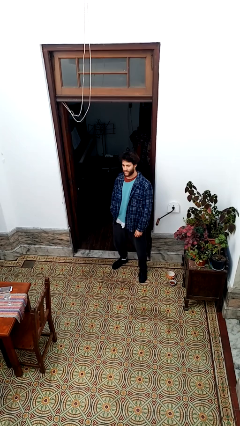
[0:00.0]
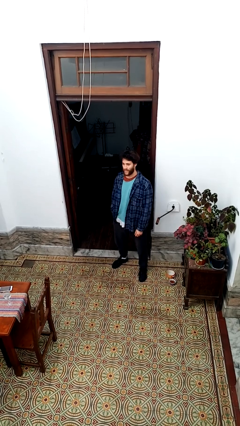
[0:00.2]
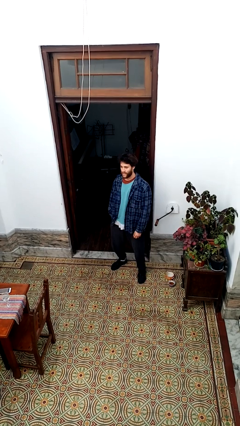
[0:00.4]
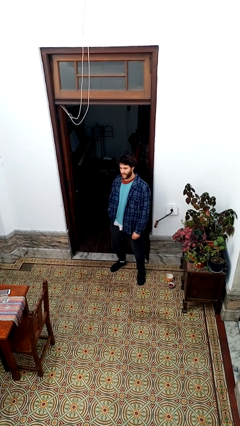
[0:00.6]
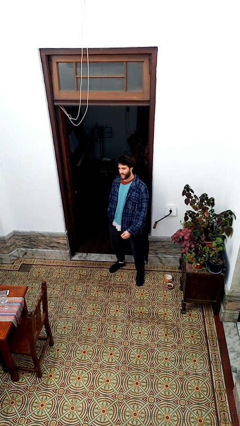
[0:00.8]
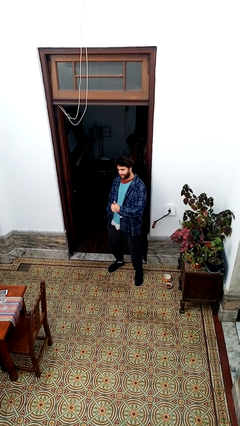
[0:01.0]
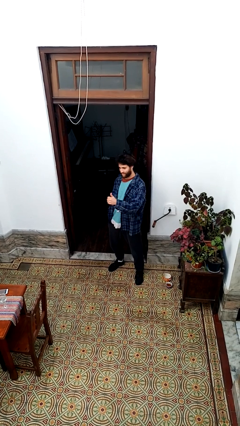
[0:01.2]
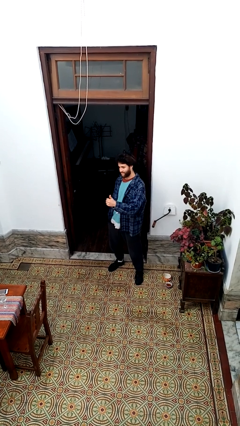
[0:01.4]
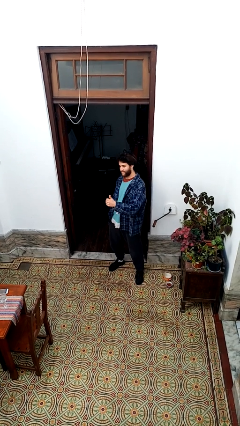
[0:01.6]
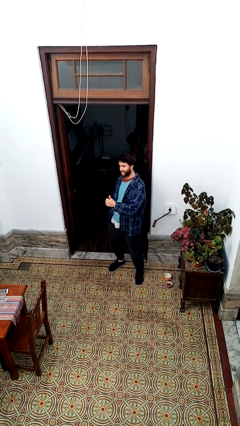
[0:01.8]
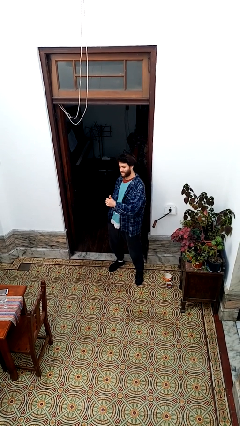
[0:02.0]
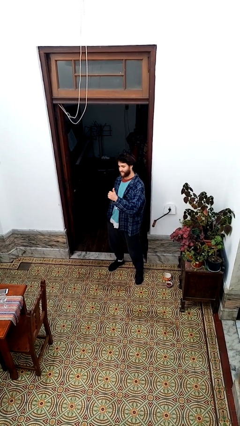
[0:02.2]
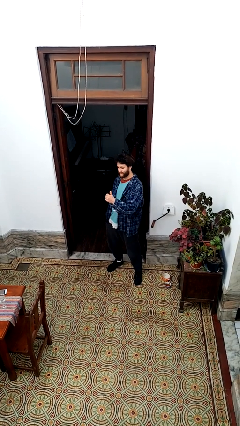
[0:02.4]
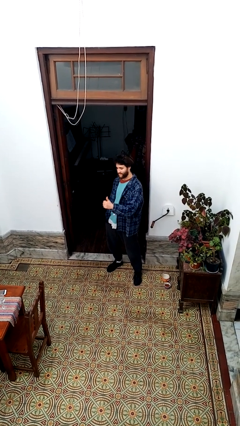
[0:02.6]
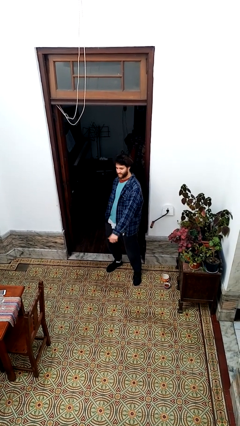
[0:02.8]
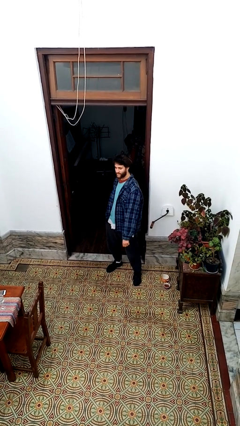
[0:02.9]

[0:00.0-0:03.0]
person gestures thumbs up

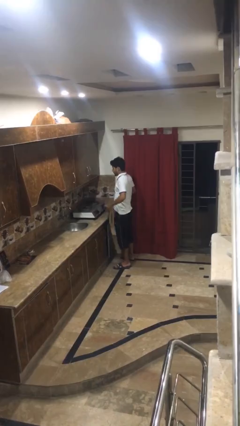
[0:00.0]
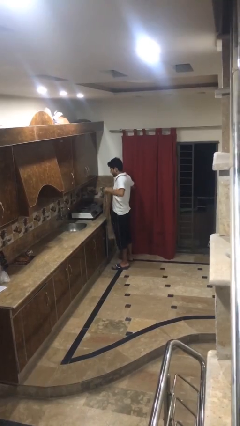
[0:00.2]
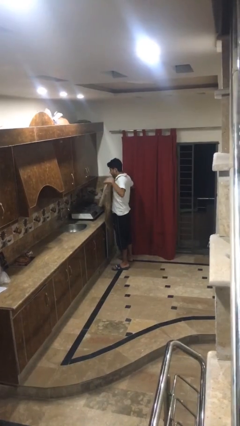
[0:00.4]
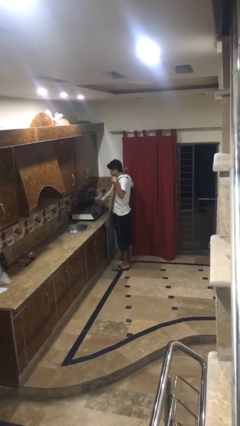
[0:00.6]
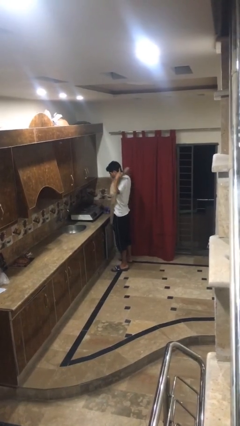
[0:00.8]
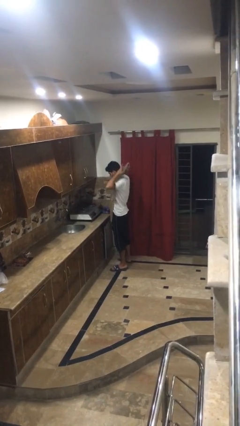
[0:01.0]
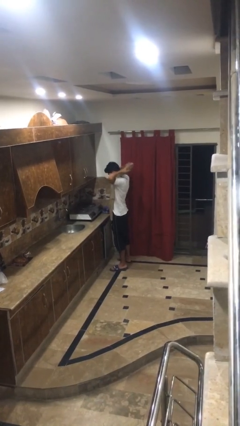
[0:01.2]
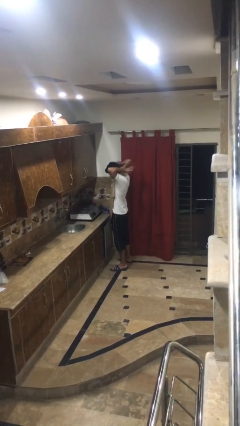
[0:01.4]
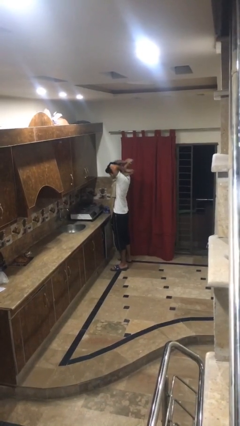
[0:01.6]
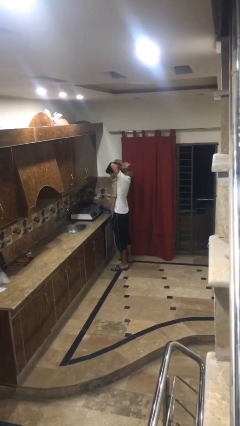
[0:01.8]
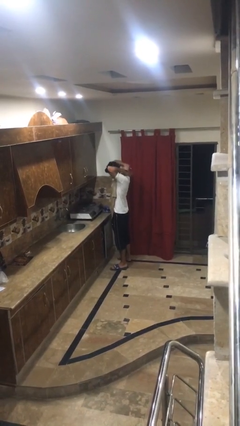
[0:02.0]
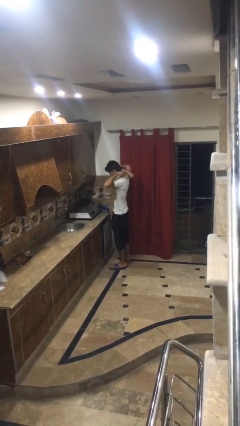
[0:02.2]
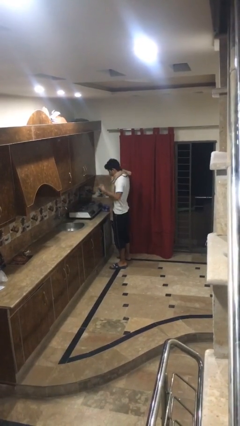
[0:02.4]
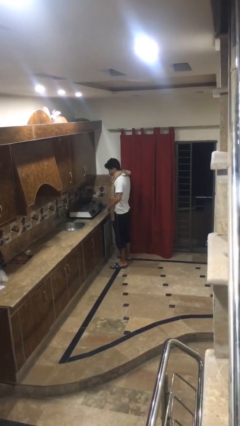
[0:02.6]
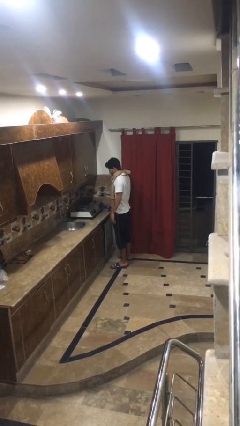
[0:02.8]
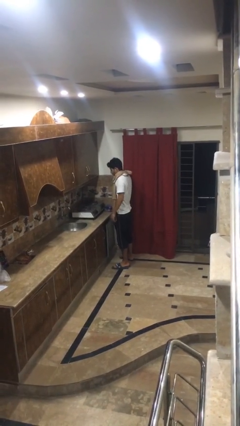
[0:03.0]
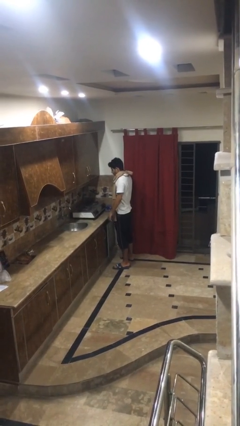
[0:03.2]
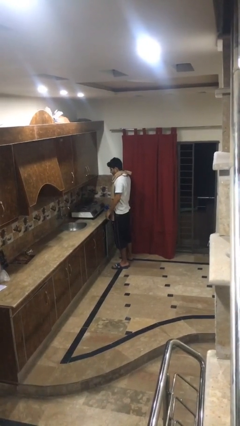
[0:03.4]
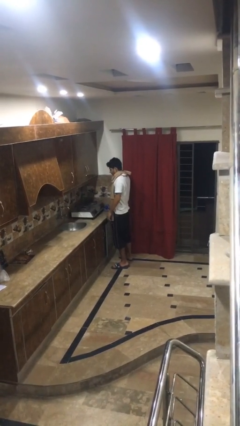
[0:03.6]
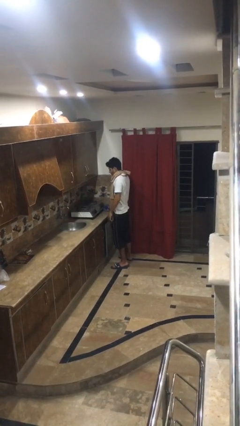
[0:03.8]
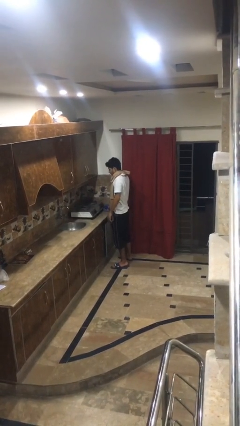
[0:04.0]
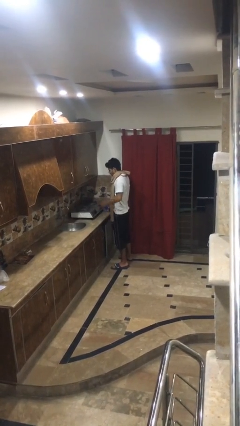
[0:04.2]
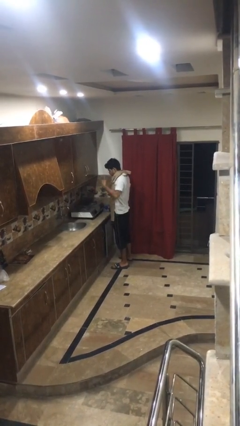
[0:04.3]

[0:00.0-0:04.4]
person puts on apron

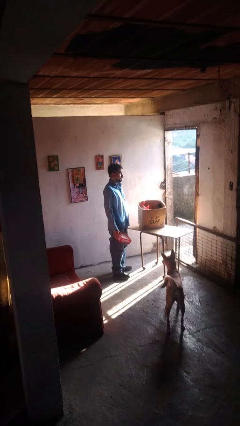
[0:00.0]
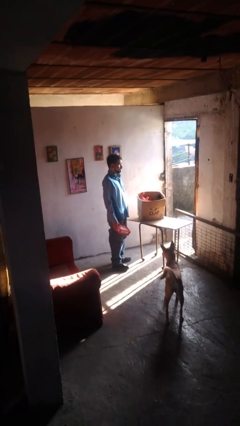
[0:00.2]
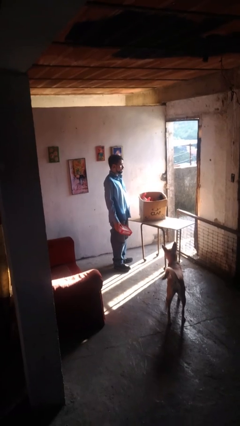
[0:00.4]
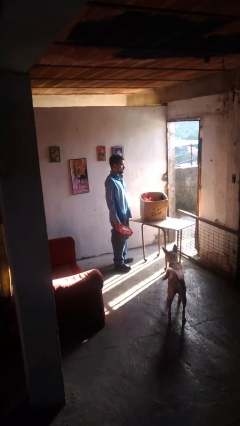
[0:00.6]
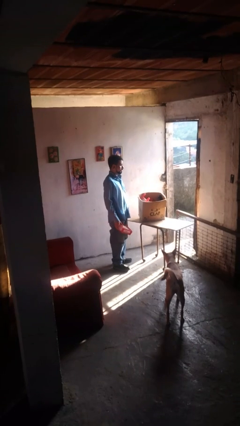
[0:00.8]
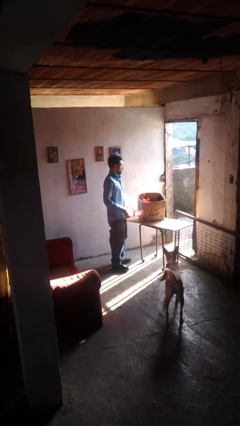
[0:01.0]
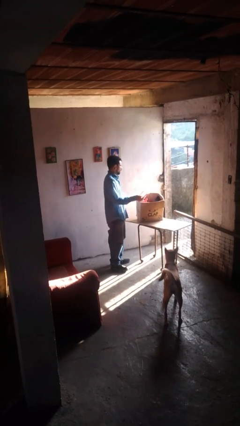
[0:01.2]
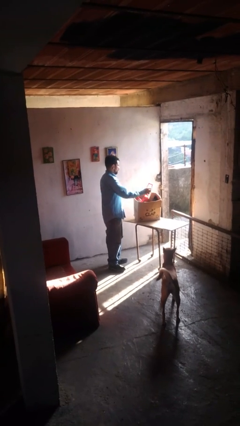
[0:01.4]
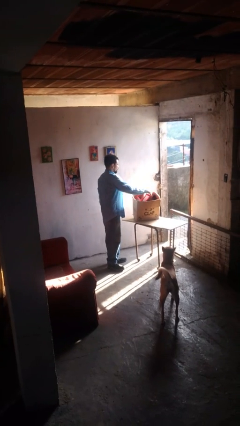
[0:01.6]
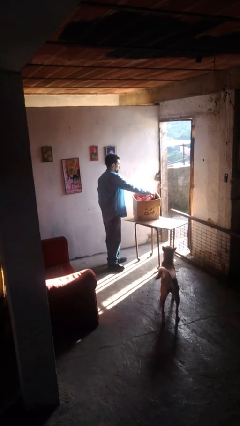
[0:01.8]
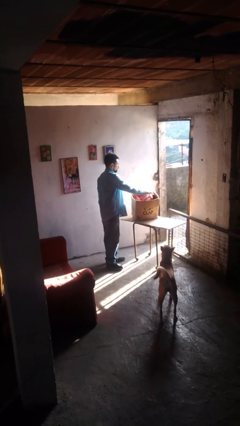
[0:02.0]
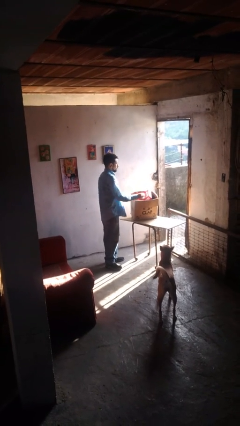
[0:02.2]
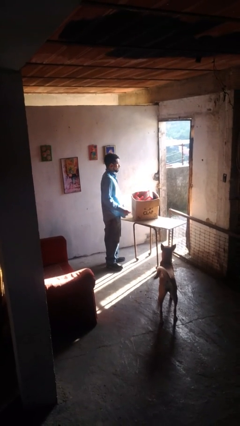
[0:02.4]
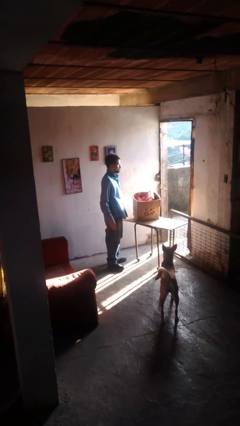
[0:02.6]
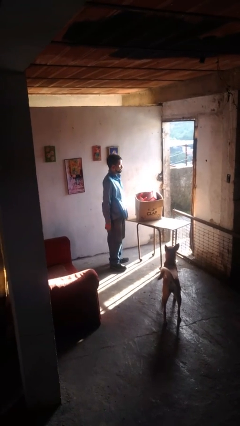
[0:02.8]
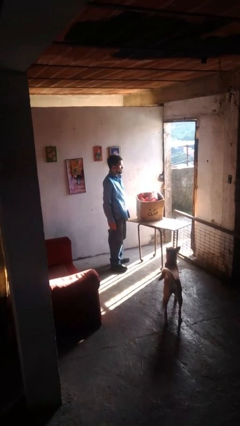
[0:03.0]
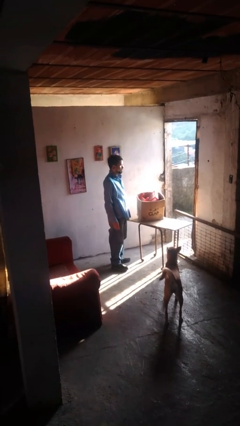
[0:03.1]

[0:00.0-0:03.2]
person puts object into box

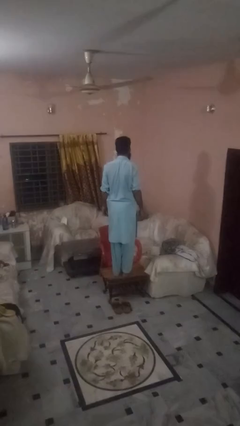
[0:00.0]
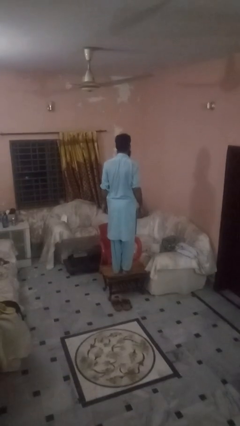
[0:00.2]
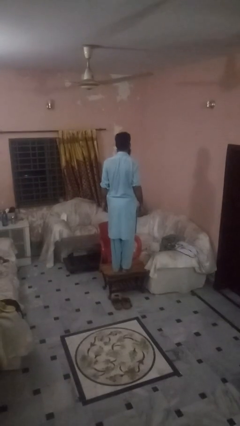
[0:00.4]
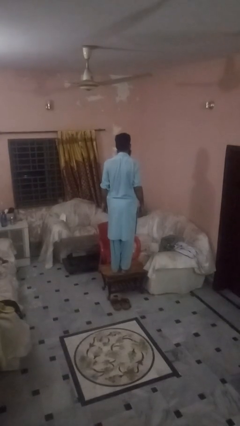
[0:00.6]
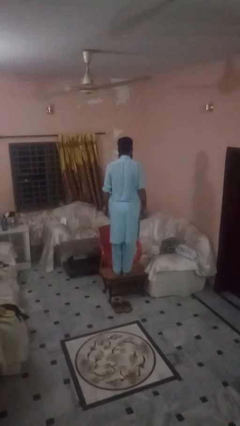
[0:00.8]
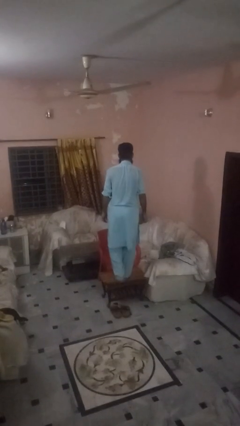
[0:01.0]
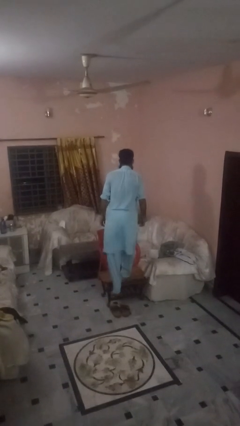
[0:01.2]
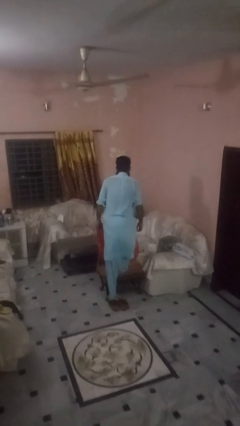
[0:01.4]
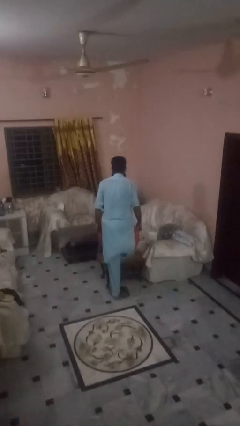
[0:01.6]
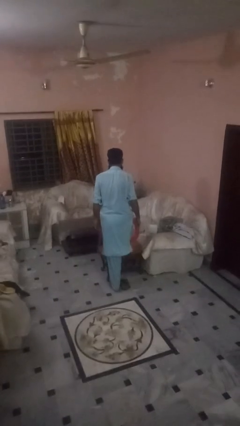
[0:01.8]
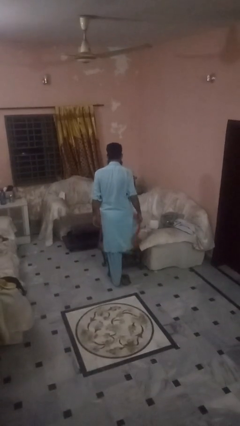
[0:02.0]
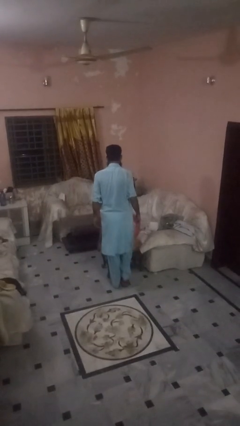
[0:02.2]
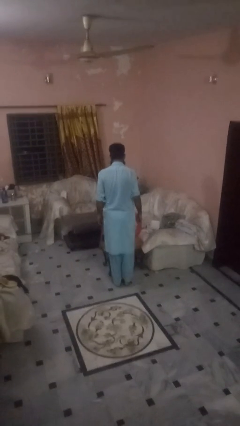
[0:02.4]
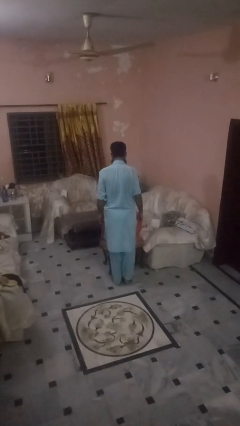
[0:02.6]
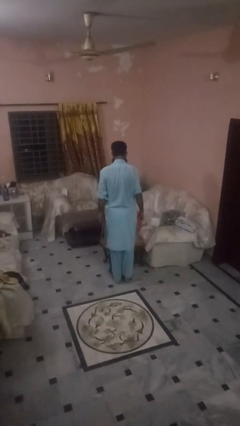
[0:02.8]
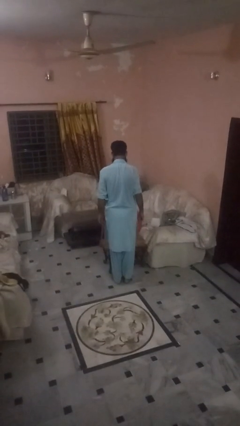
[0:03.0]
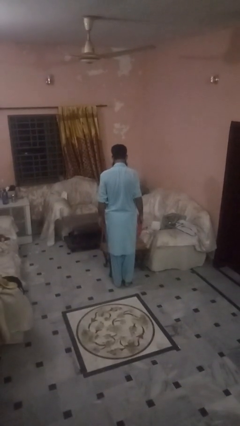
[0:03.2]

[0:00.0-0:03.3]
person climbs off table

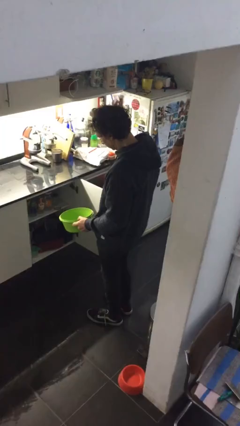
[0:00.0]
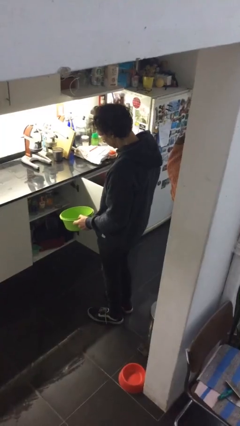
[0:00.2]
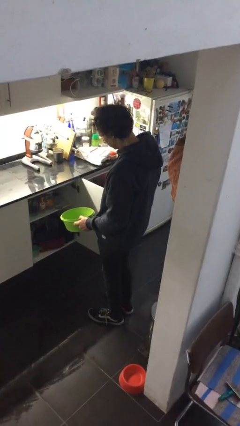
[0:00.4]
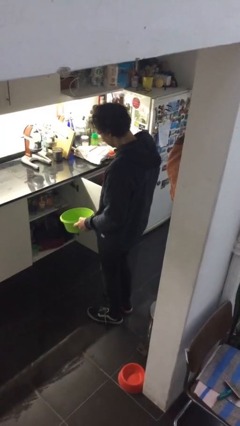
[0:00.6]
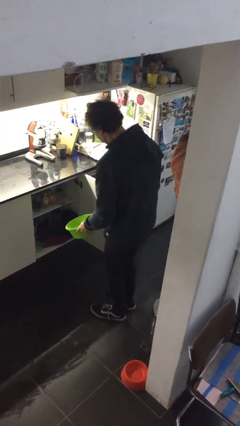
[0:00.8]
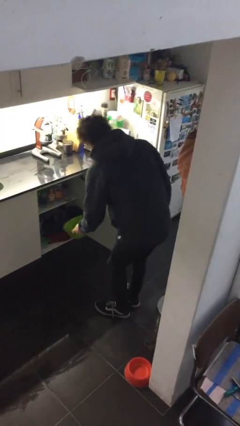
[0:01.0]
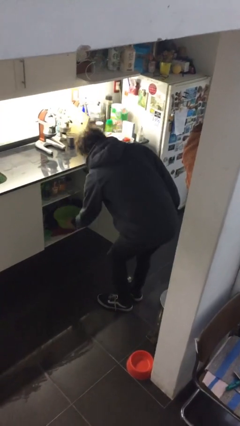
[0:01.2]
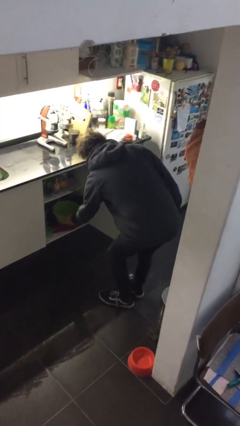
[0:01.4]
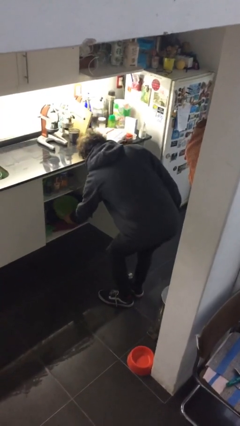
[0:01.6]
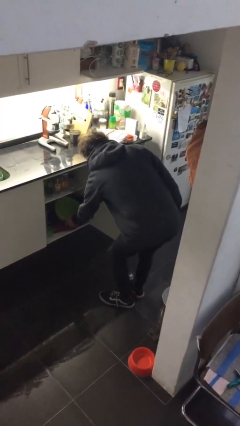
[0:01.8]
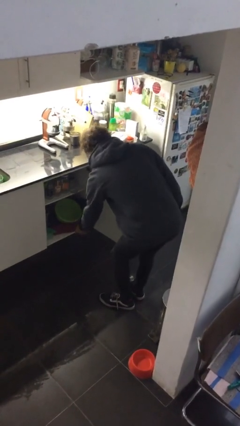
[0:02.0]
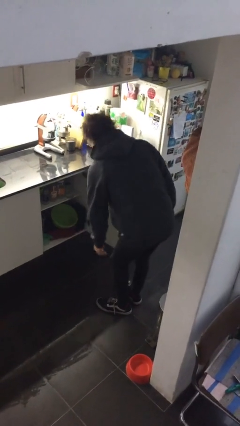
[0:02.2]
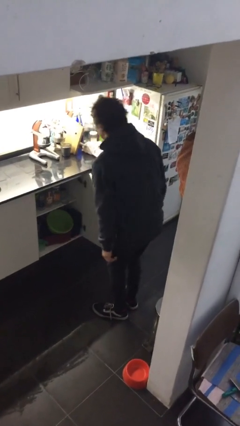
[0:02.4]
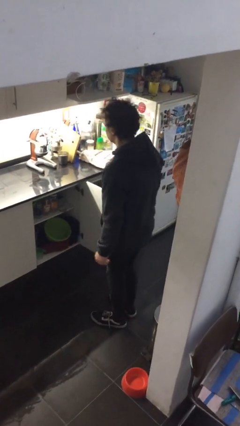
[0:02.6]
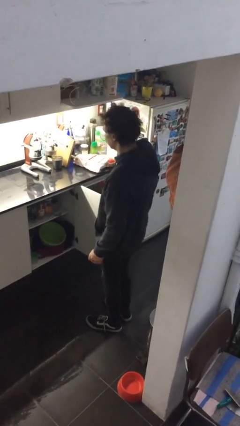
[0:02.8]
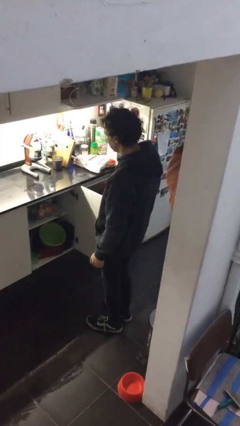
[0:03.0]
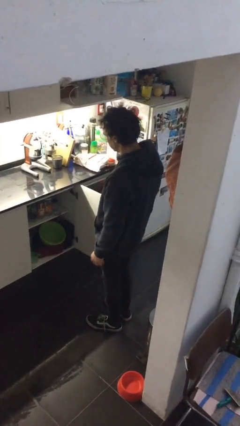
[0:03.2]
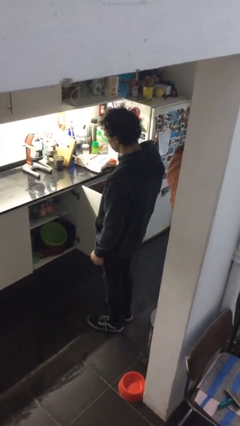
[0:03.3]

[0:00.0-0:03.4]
person puts down object into cabinet

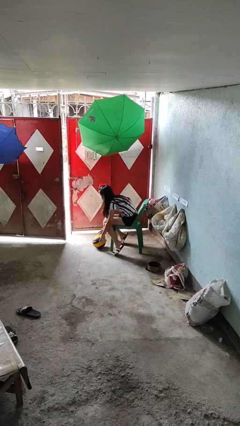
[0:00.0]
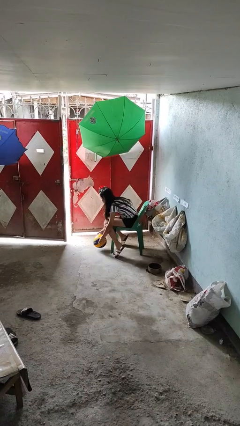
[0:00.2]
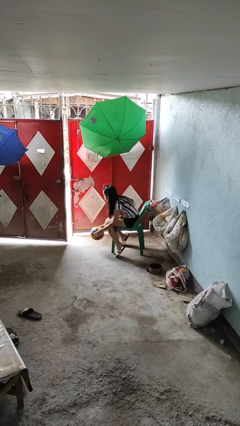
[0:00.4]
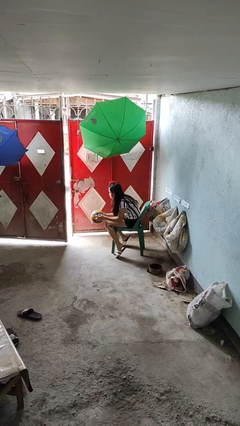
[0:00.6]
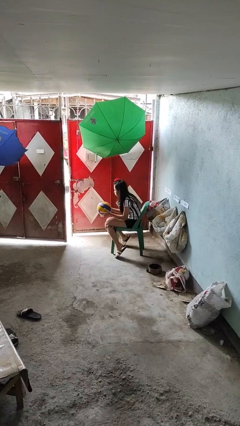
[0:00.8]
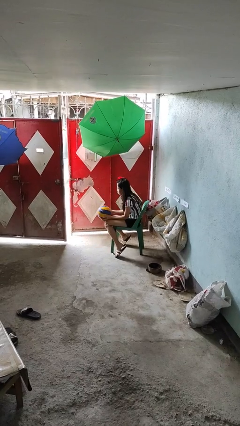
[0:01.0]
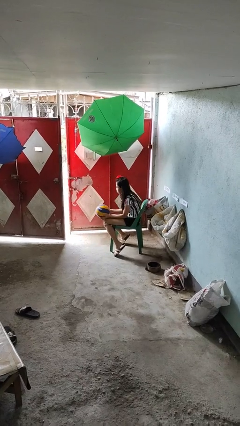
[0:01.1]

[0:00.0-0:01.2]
person picks up object from floor
